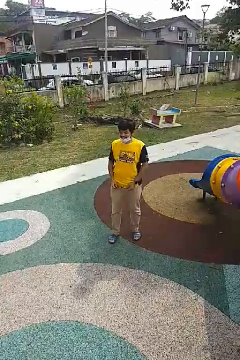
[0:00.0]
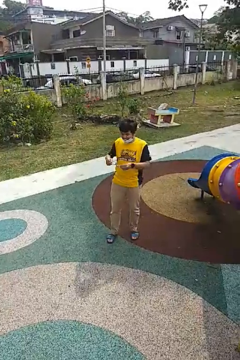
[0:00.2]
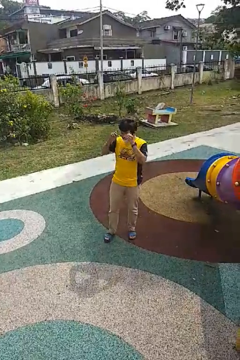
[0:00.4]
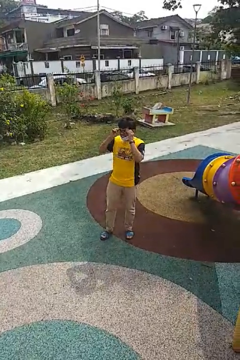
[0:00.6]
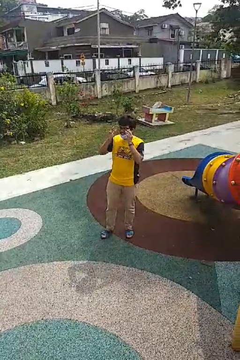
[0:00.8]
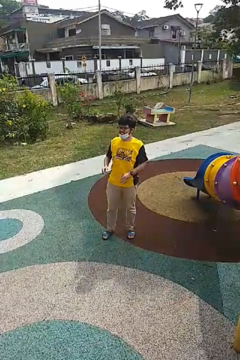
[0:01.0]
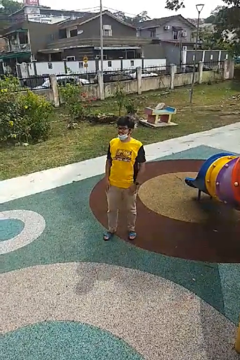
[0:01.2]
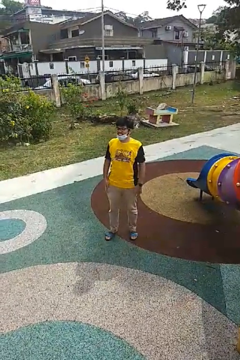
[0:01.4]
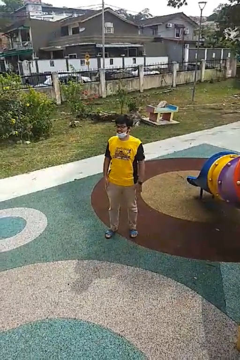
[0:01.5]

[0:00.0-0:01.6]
person puts on glasses

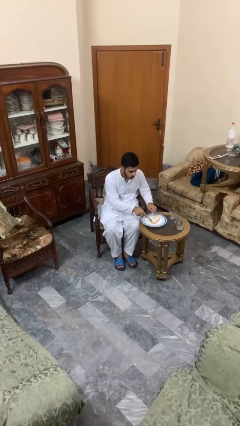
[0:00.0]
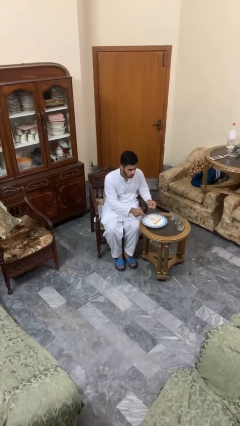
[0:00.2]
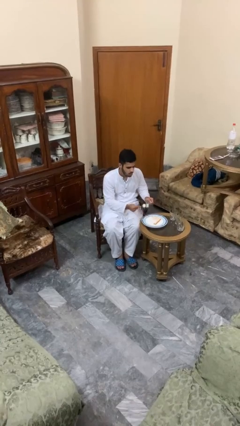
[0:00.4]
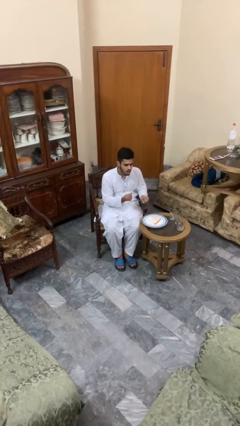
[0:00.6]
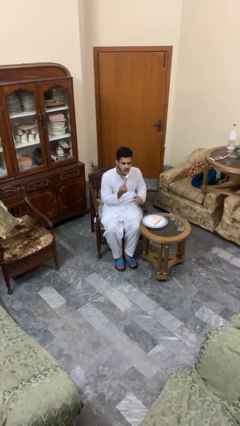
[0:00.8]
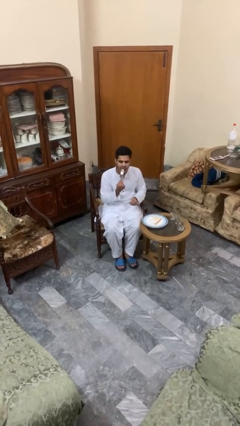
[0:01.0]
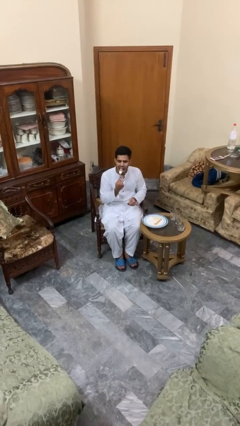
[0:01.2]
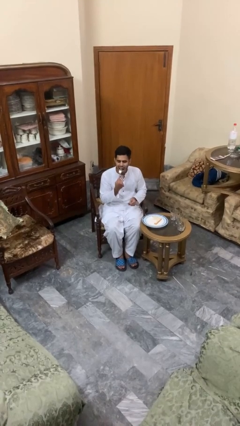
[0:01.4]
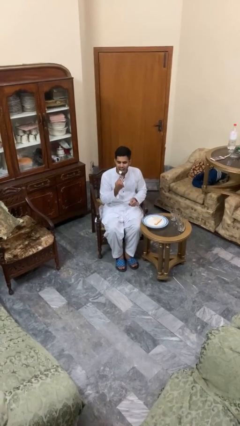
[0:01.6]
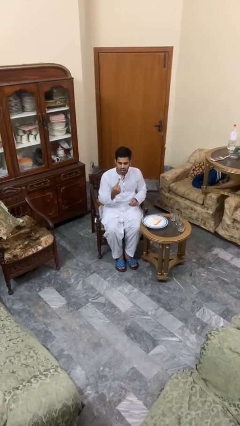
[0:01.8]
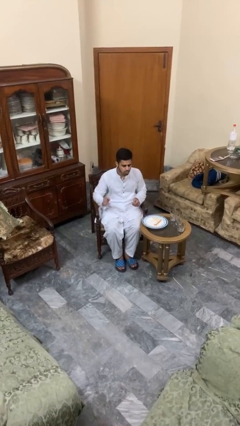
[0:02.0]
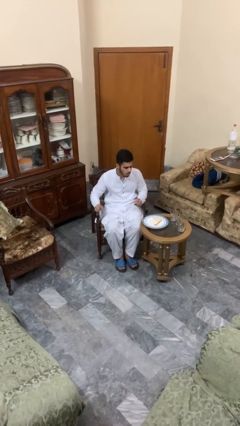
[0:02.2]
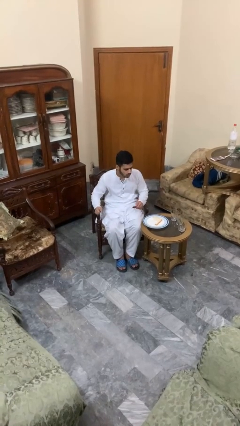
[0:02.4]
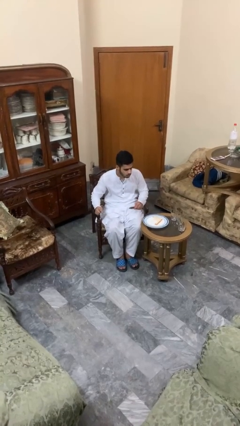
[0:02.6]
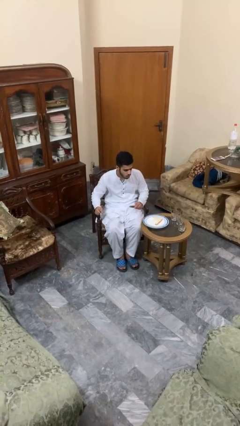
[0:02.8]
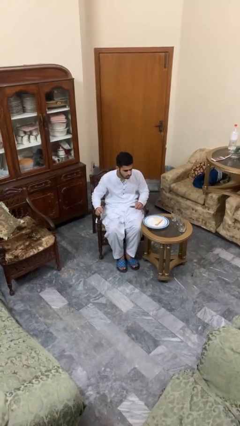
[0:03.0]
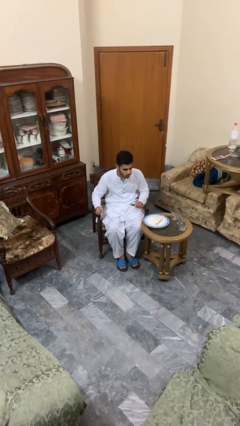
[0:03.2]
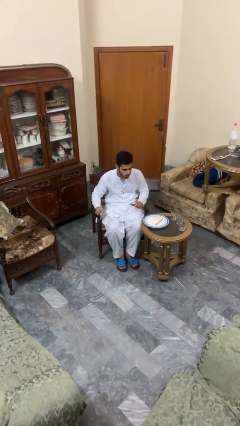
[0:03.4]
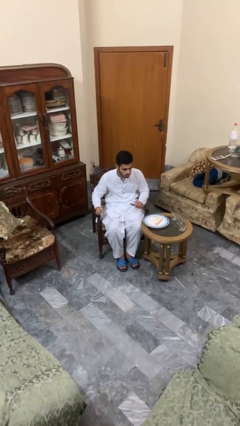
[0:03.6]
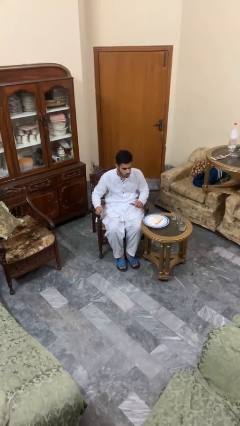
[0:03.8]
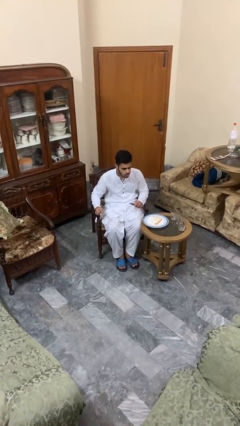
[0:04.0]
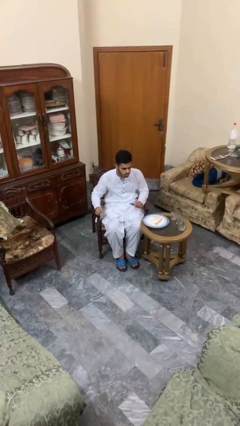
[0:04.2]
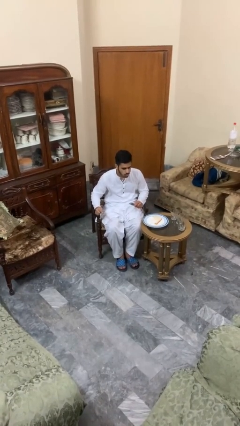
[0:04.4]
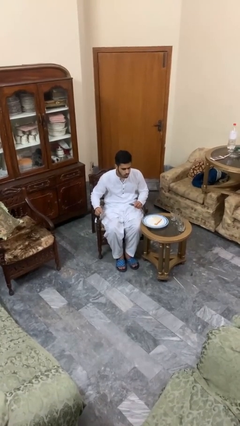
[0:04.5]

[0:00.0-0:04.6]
person eats with utensil

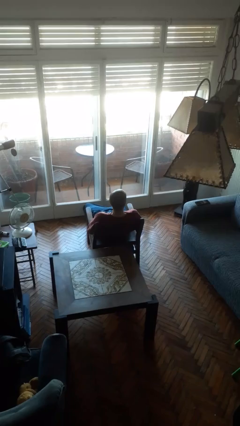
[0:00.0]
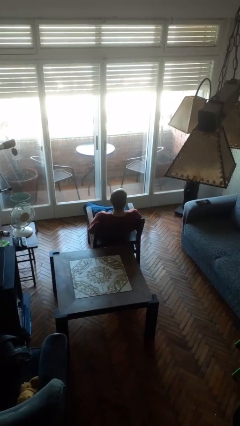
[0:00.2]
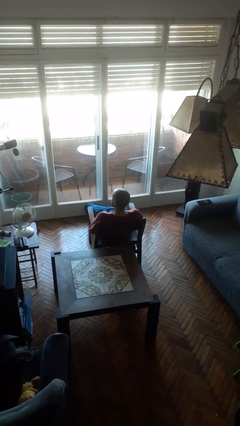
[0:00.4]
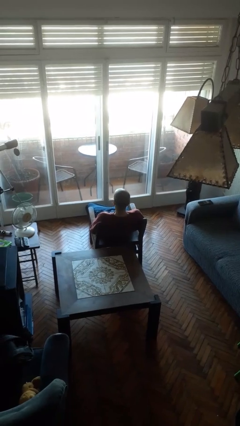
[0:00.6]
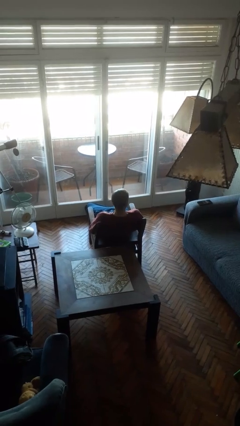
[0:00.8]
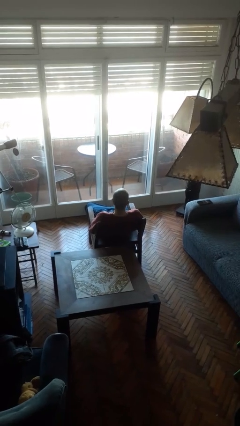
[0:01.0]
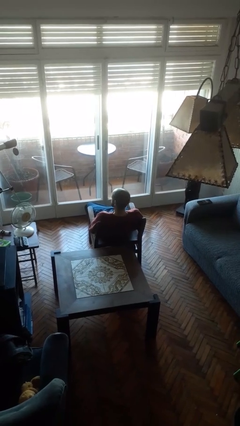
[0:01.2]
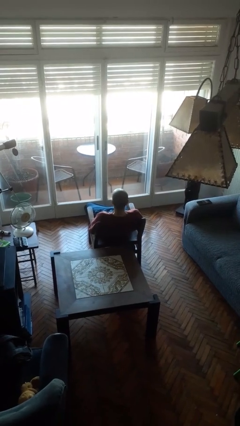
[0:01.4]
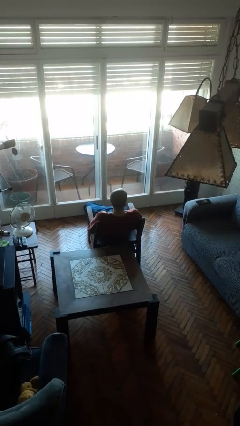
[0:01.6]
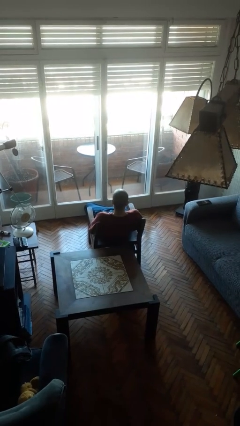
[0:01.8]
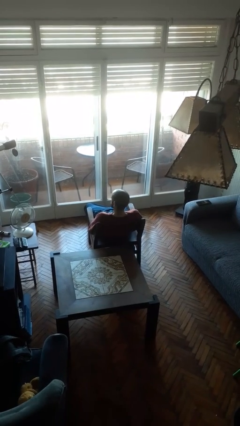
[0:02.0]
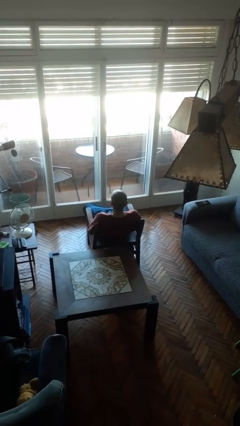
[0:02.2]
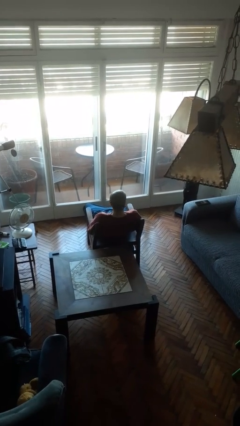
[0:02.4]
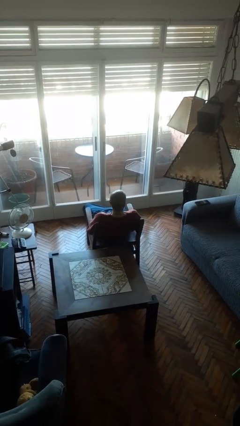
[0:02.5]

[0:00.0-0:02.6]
person shakes head

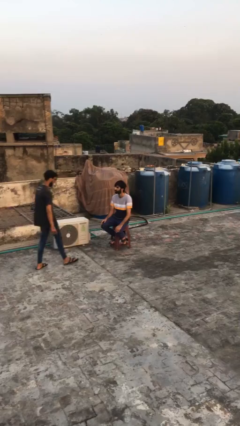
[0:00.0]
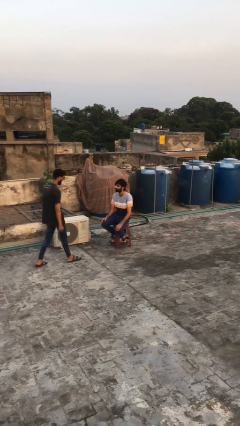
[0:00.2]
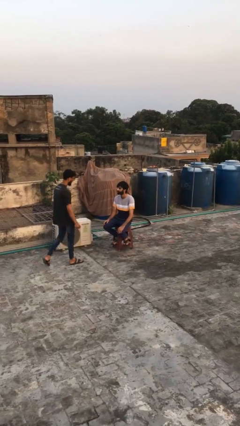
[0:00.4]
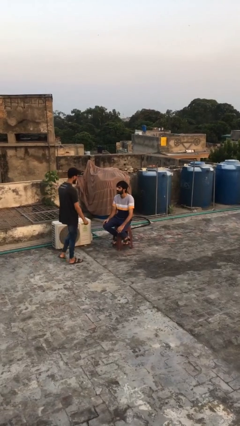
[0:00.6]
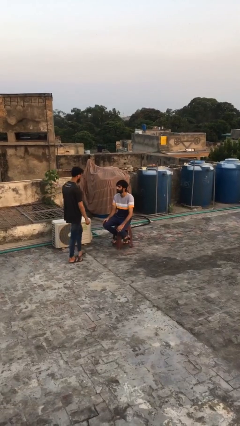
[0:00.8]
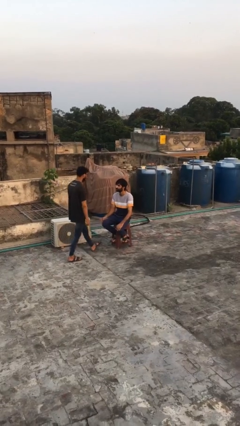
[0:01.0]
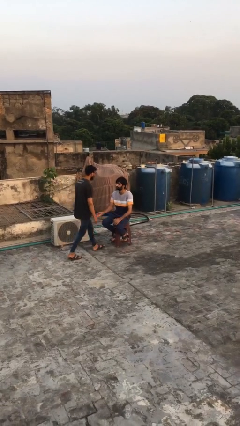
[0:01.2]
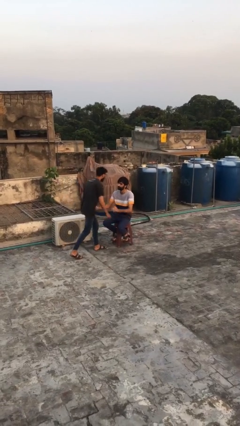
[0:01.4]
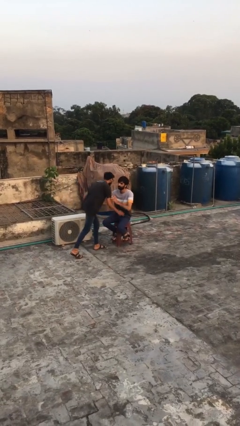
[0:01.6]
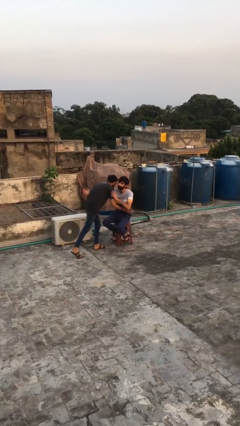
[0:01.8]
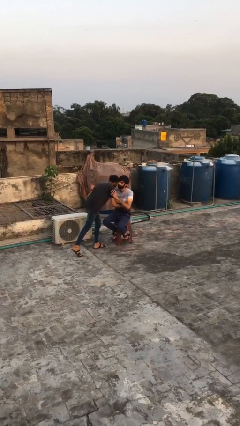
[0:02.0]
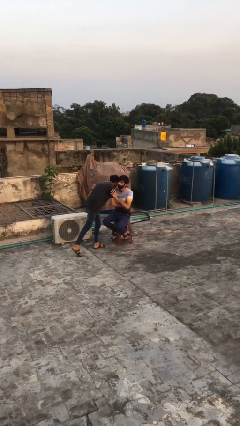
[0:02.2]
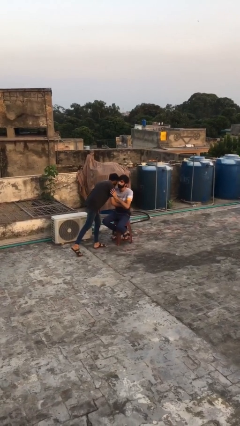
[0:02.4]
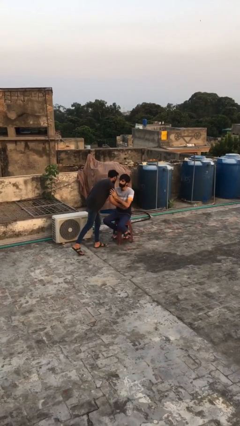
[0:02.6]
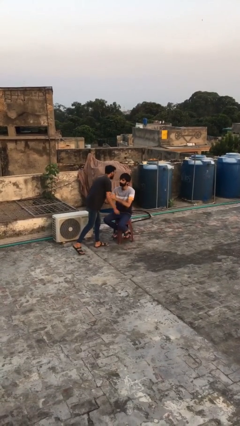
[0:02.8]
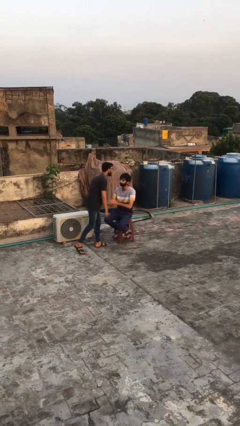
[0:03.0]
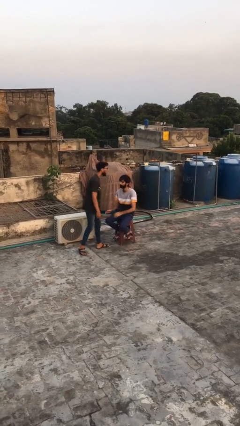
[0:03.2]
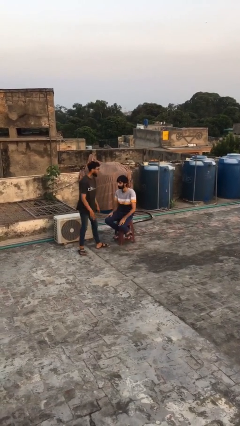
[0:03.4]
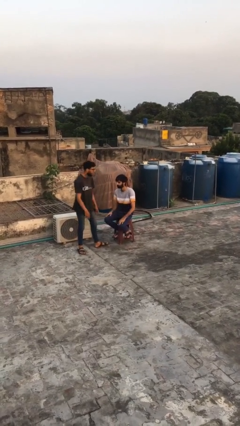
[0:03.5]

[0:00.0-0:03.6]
person embraces person

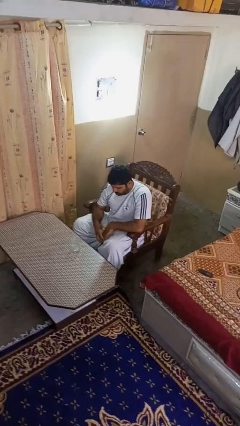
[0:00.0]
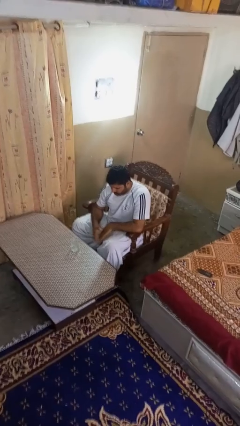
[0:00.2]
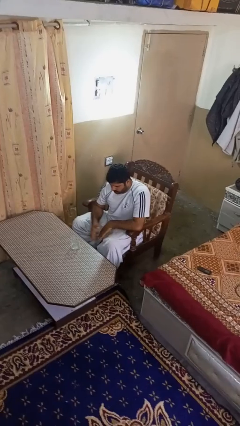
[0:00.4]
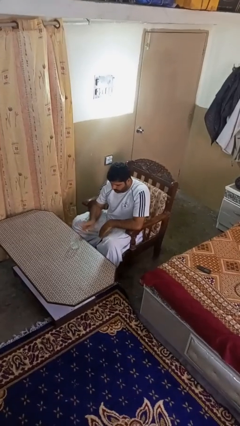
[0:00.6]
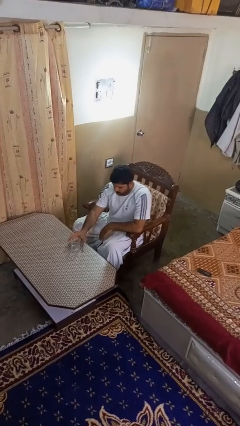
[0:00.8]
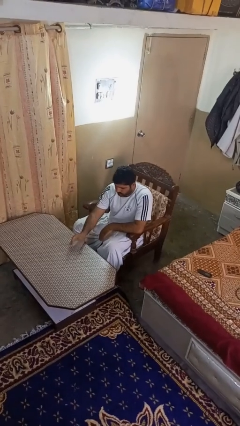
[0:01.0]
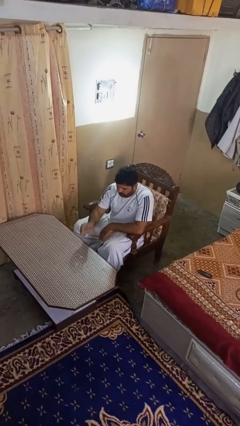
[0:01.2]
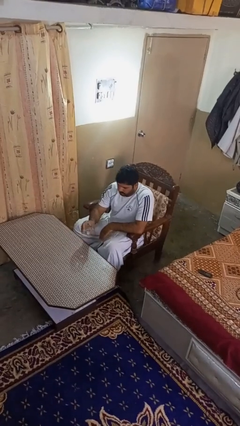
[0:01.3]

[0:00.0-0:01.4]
person picks up object from table

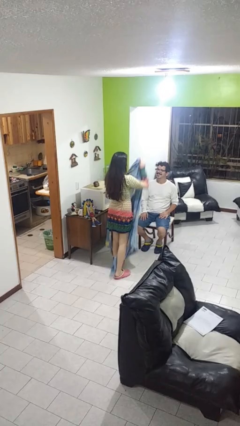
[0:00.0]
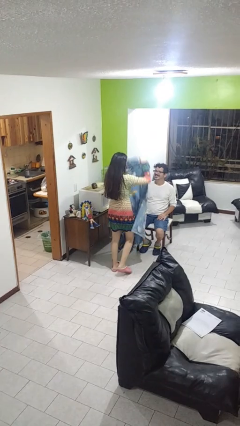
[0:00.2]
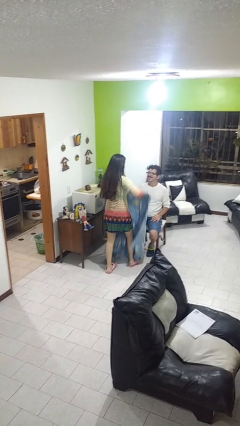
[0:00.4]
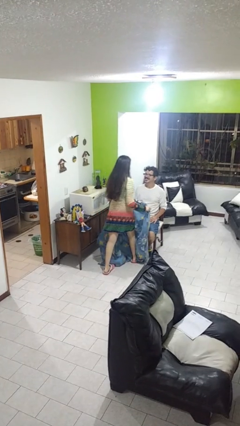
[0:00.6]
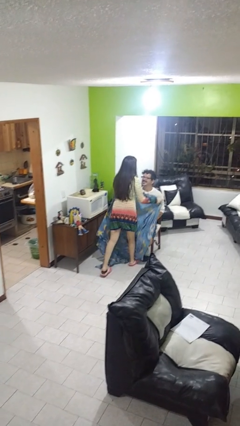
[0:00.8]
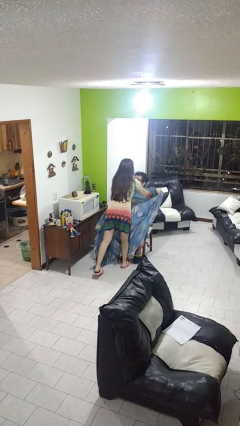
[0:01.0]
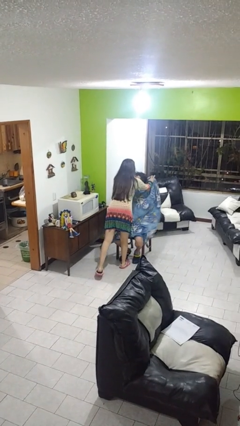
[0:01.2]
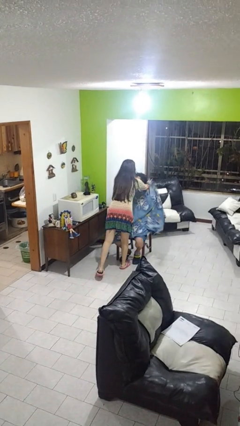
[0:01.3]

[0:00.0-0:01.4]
person covers friend with blanket

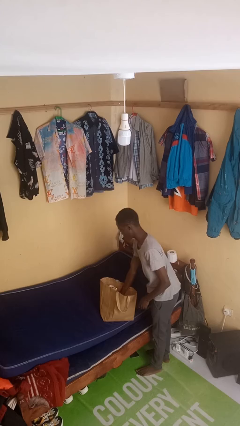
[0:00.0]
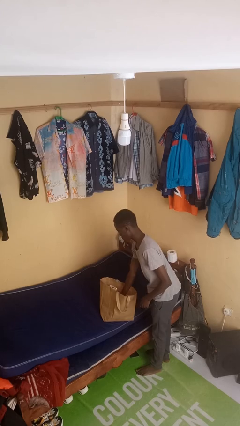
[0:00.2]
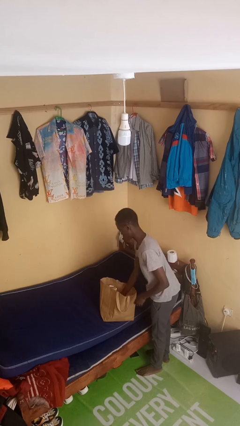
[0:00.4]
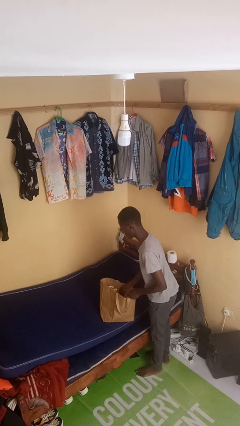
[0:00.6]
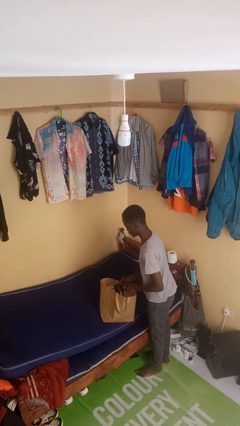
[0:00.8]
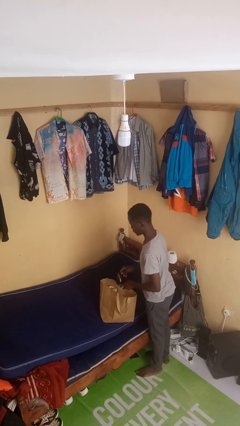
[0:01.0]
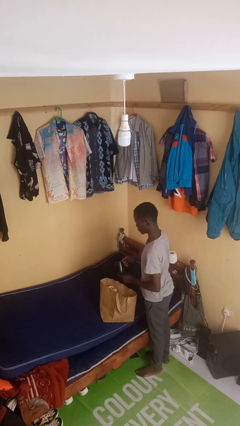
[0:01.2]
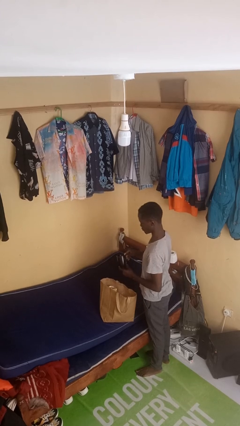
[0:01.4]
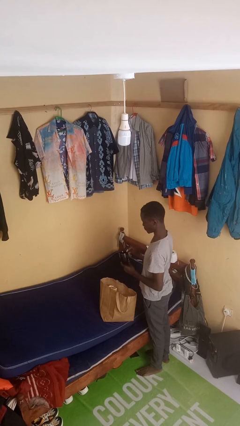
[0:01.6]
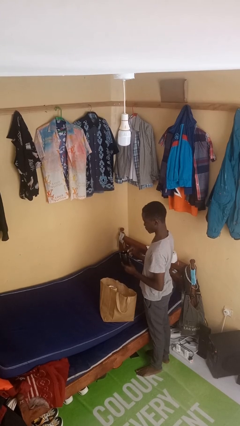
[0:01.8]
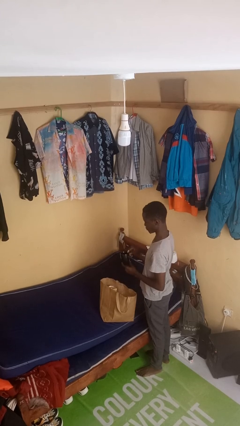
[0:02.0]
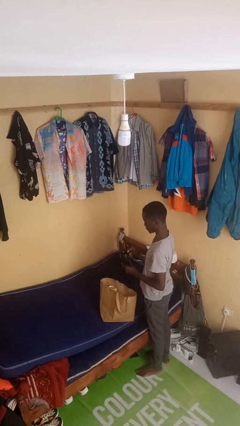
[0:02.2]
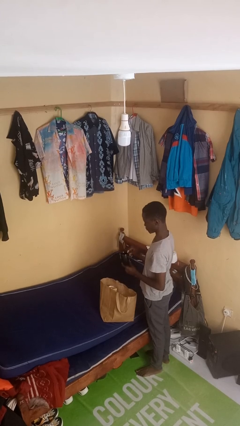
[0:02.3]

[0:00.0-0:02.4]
person takes object from bag
